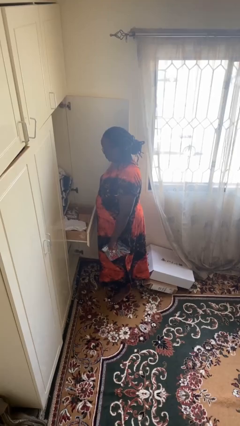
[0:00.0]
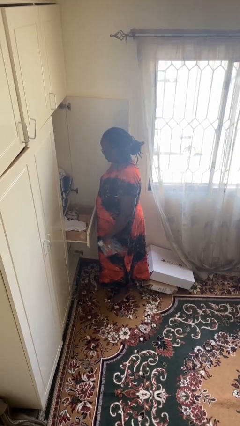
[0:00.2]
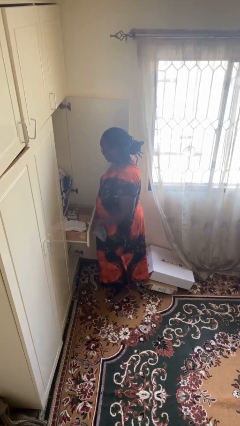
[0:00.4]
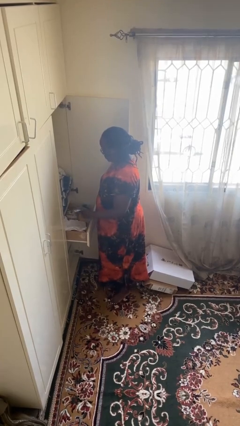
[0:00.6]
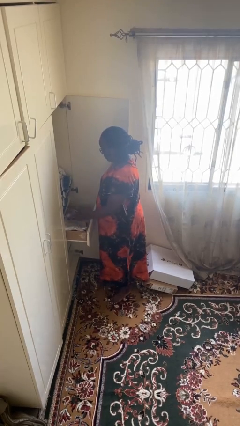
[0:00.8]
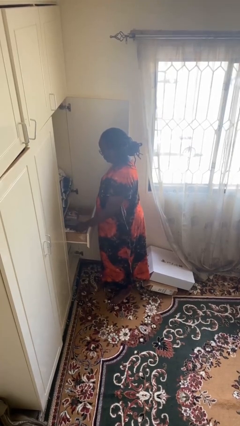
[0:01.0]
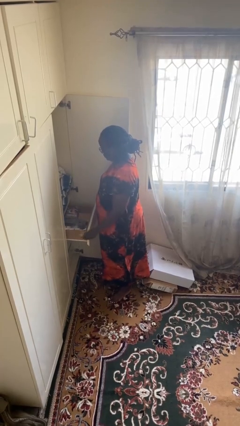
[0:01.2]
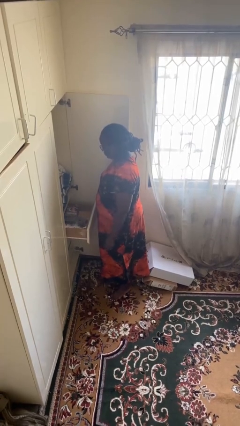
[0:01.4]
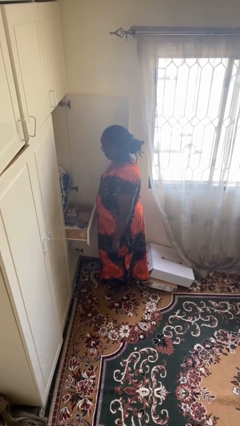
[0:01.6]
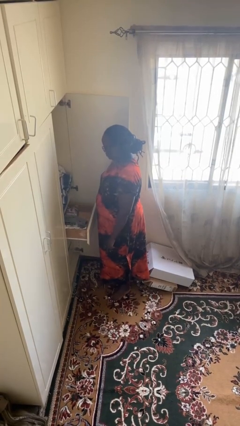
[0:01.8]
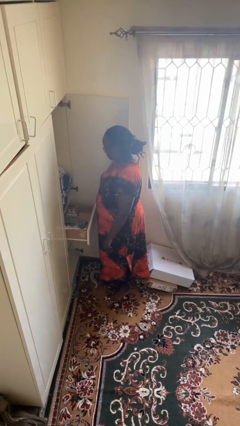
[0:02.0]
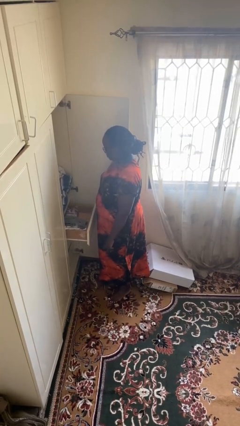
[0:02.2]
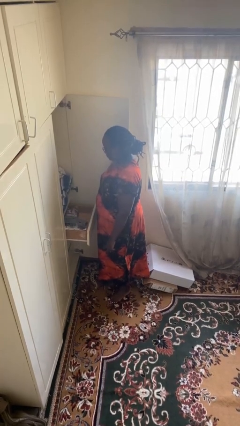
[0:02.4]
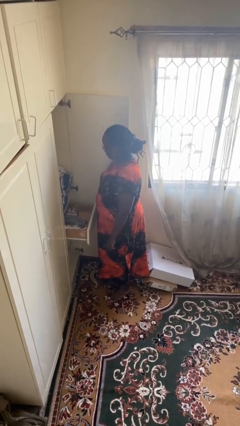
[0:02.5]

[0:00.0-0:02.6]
person puts clothes into dresser

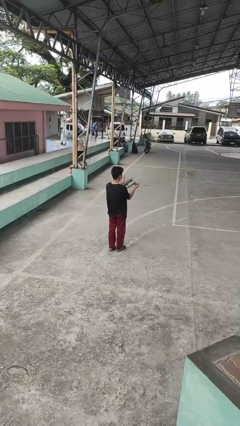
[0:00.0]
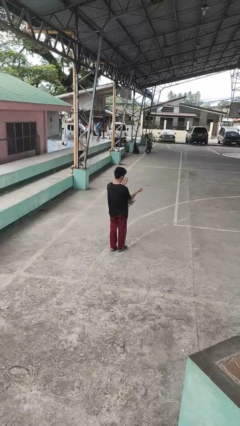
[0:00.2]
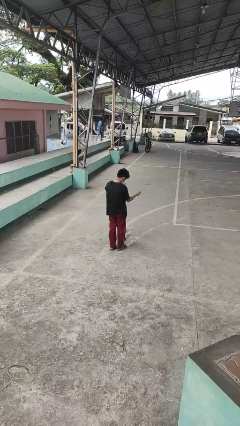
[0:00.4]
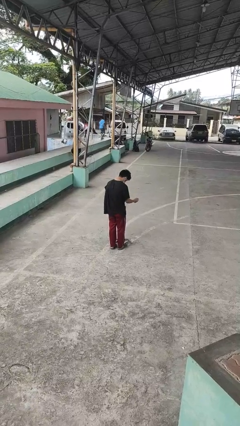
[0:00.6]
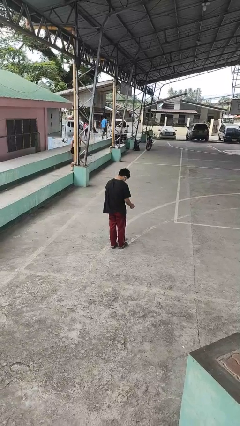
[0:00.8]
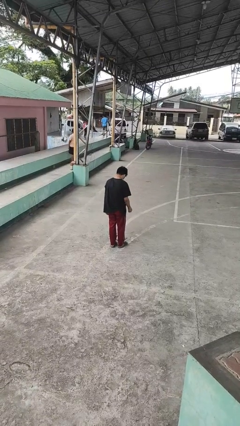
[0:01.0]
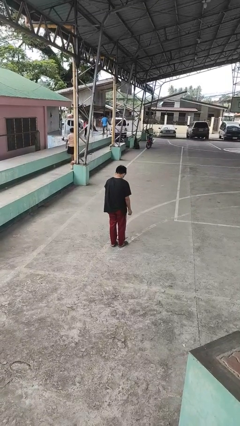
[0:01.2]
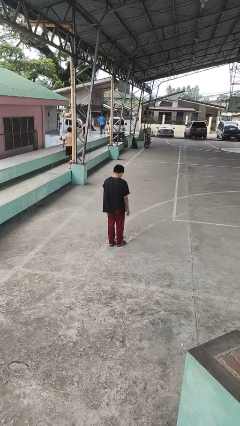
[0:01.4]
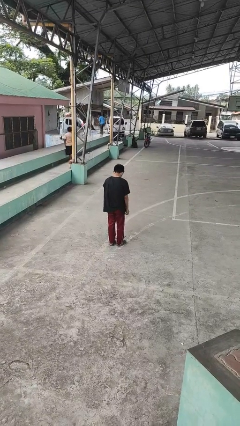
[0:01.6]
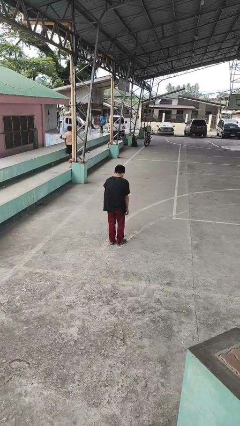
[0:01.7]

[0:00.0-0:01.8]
person drops object

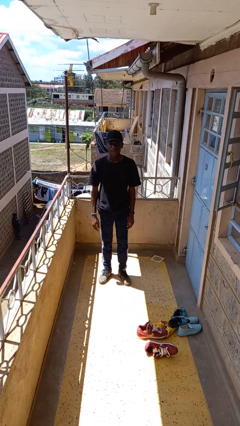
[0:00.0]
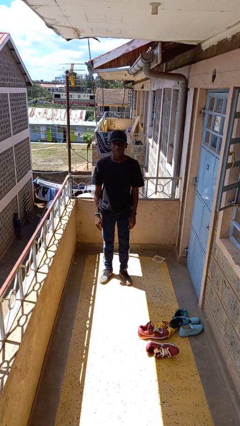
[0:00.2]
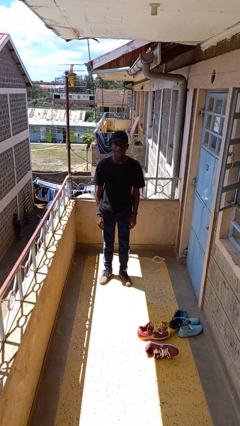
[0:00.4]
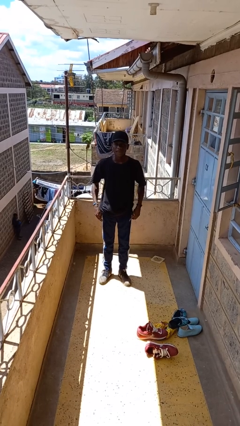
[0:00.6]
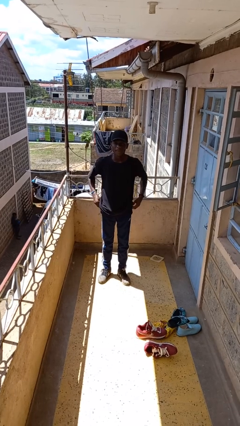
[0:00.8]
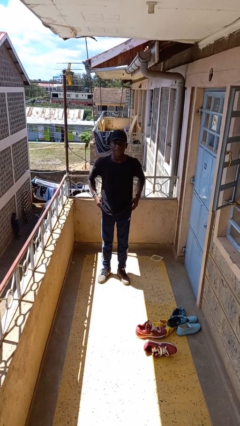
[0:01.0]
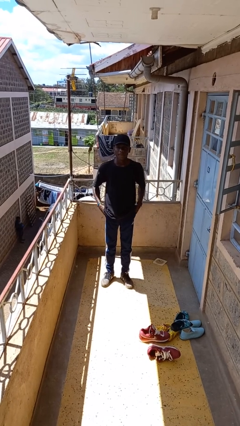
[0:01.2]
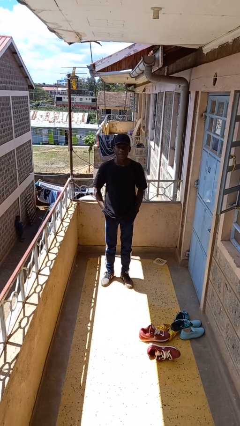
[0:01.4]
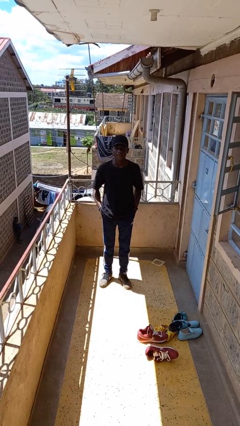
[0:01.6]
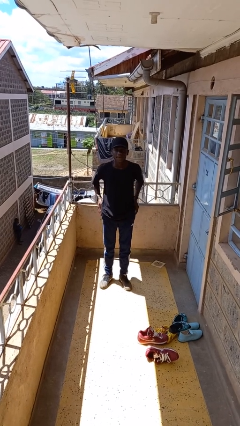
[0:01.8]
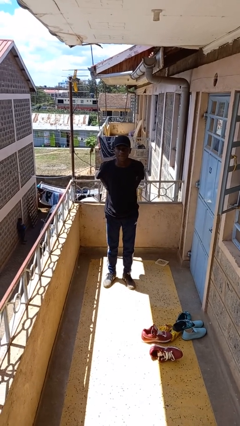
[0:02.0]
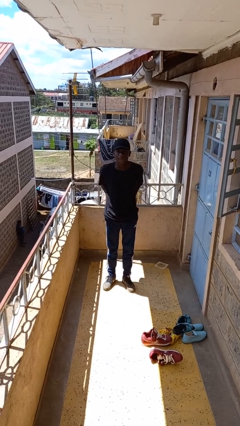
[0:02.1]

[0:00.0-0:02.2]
person puts hands in back pockets

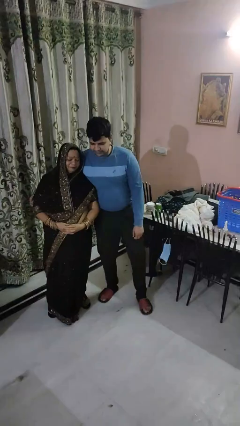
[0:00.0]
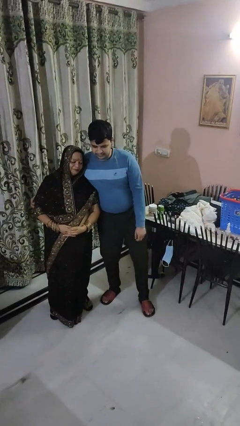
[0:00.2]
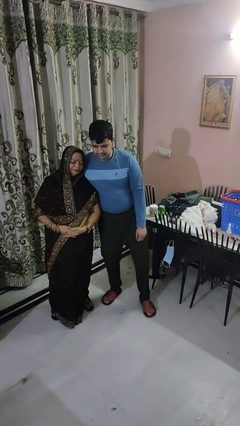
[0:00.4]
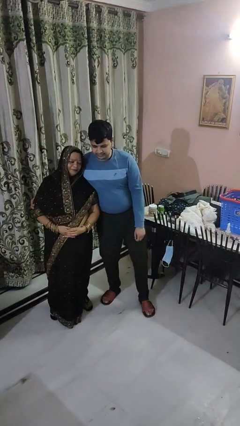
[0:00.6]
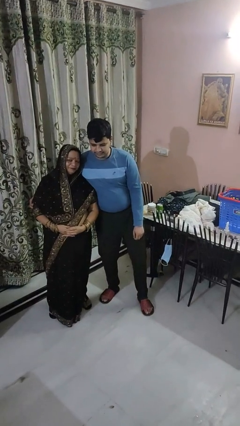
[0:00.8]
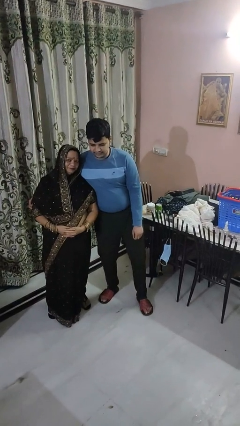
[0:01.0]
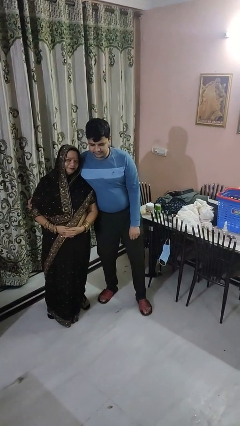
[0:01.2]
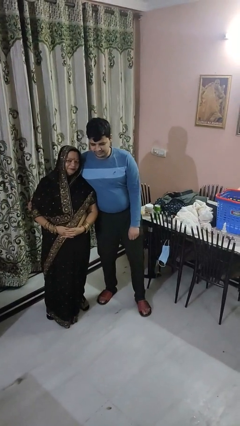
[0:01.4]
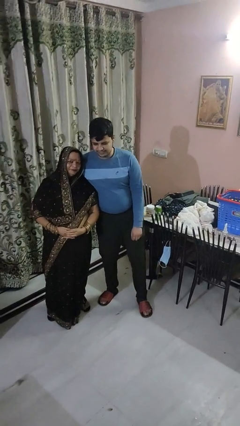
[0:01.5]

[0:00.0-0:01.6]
person hugs person from side

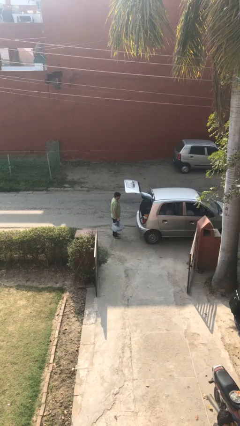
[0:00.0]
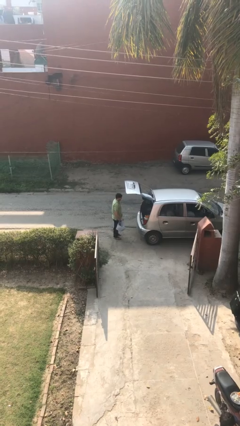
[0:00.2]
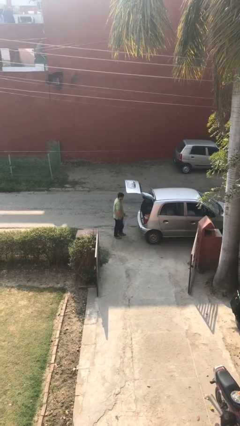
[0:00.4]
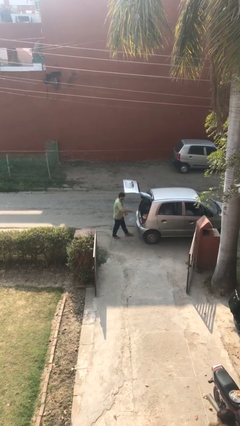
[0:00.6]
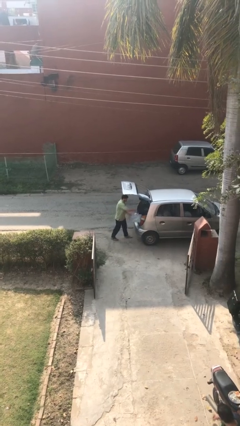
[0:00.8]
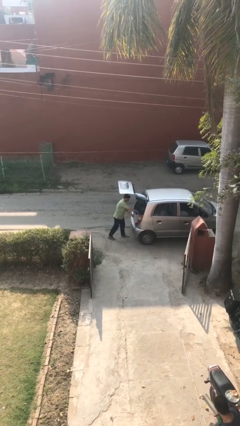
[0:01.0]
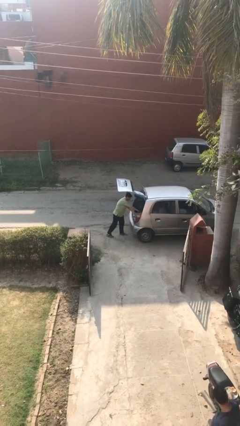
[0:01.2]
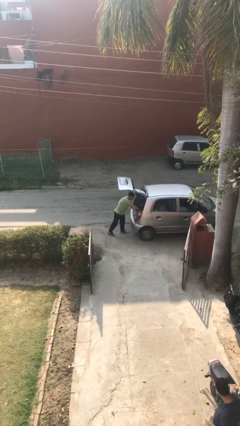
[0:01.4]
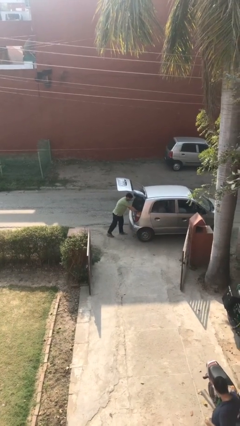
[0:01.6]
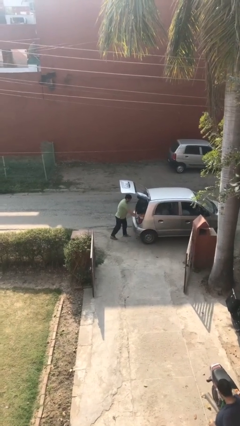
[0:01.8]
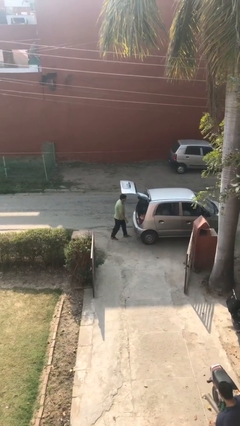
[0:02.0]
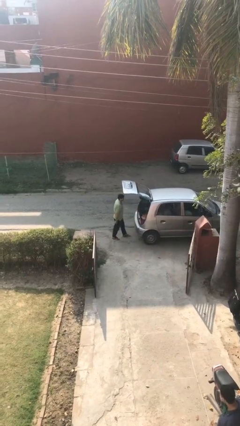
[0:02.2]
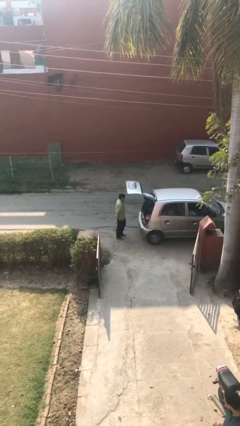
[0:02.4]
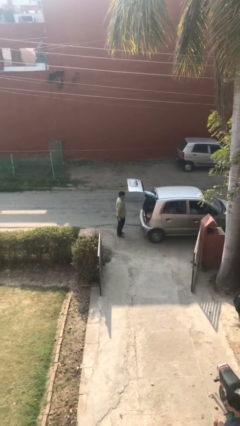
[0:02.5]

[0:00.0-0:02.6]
person loads car

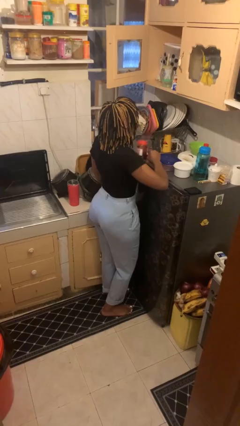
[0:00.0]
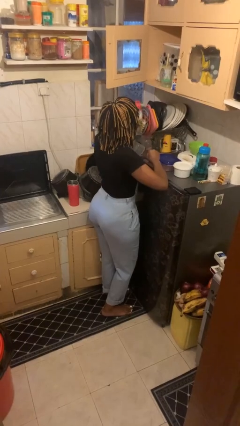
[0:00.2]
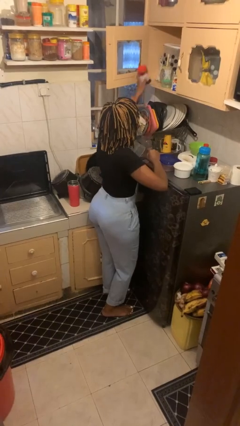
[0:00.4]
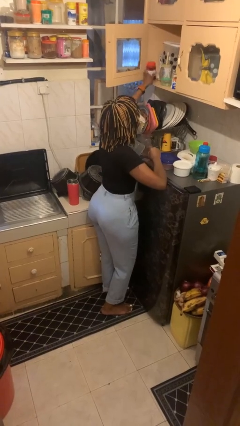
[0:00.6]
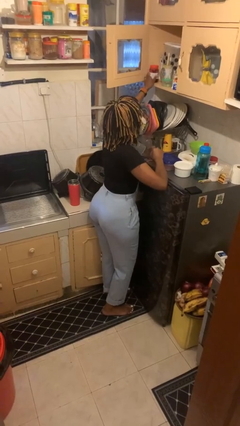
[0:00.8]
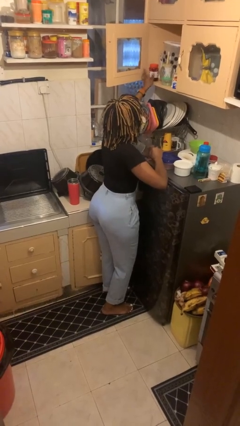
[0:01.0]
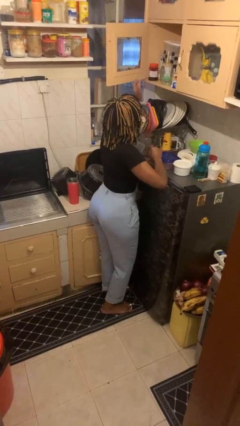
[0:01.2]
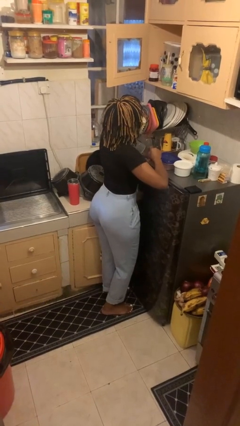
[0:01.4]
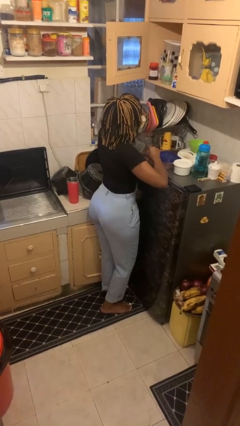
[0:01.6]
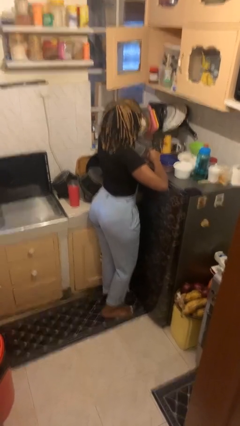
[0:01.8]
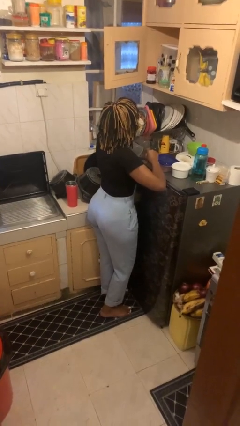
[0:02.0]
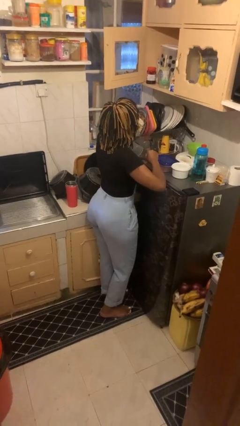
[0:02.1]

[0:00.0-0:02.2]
person puts object in cabinet

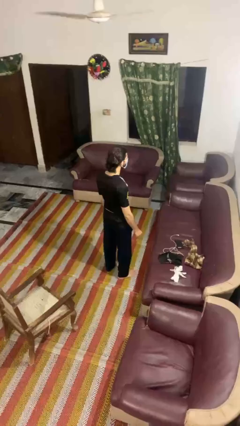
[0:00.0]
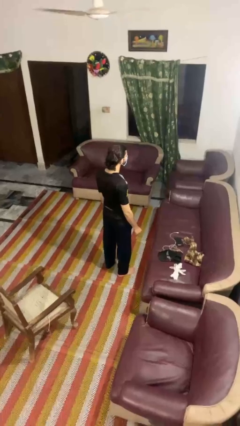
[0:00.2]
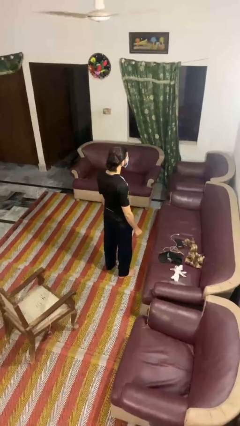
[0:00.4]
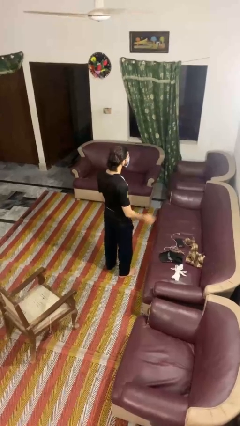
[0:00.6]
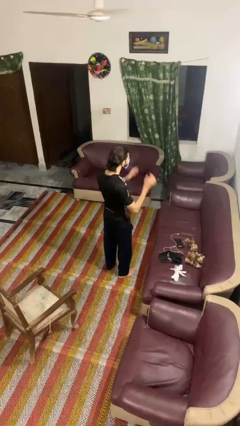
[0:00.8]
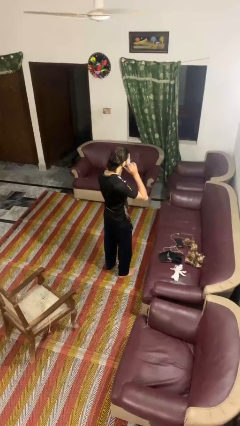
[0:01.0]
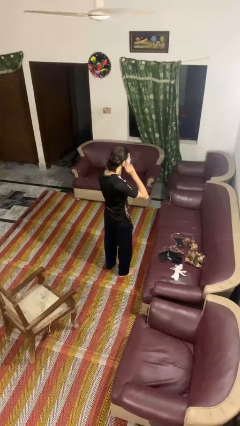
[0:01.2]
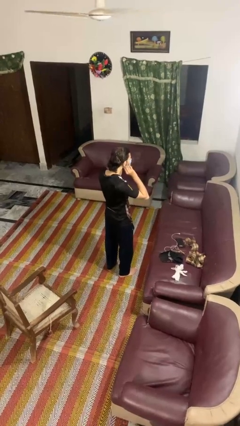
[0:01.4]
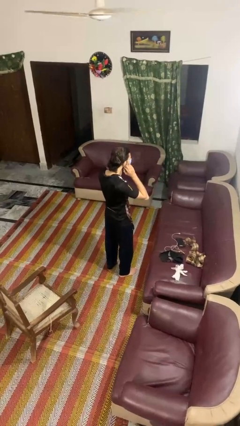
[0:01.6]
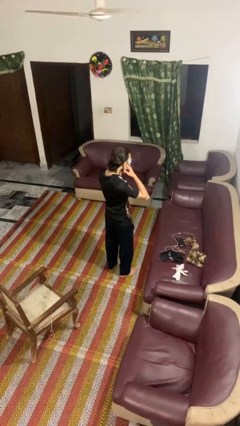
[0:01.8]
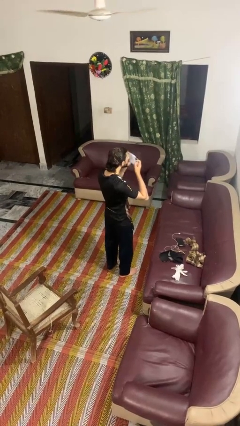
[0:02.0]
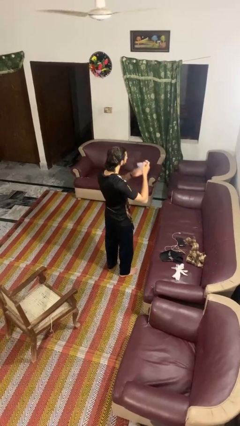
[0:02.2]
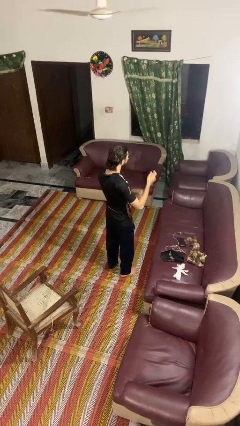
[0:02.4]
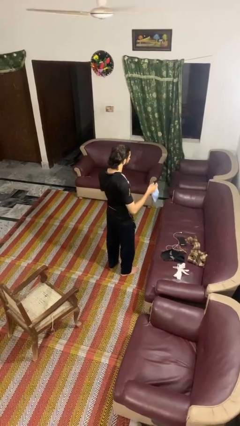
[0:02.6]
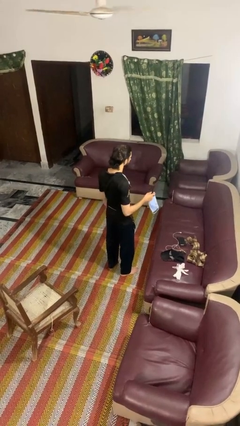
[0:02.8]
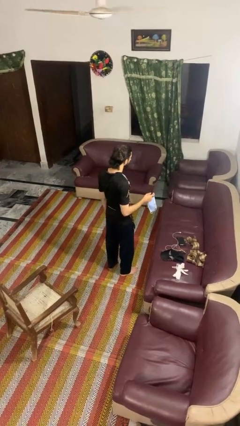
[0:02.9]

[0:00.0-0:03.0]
person takes off facemask

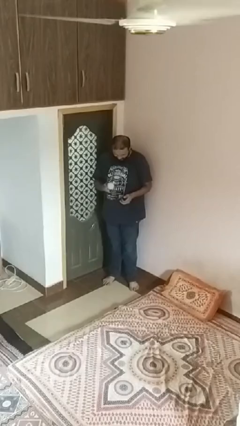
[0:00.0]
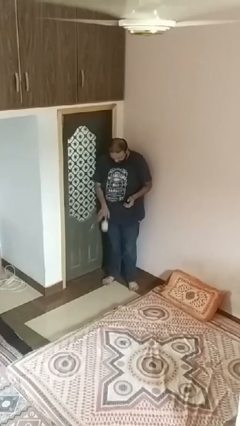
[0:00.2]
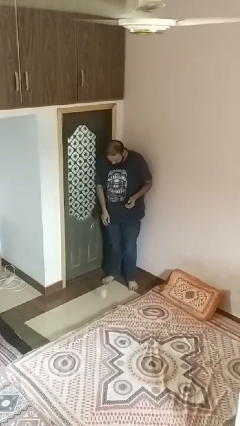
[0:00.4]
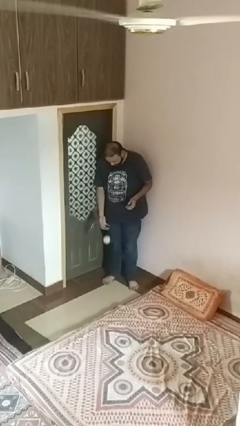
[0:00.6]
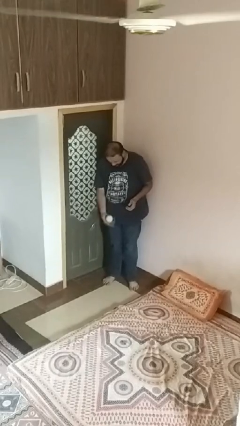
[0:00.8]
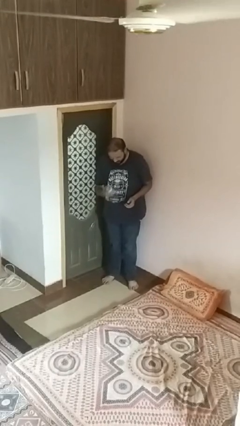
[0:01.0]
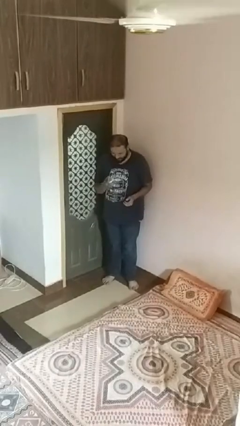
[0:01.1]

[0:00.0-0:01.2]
person bounces ball on floor
